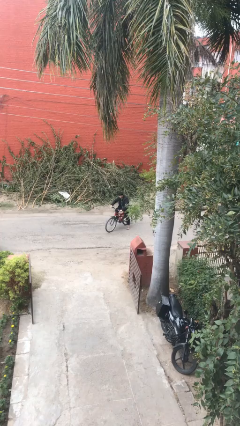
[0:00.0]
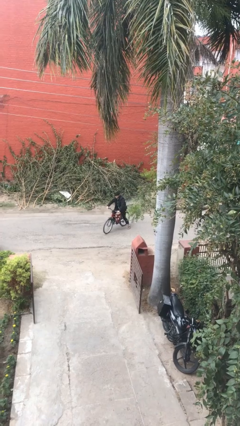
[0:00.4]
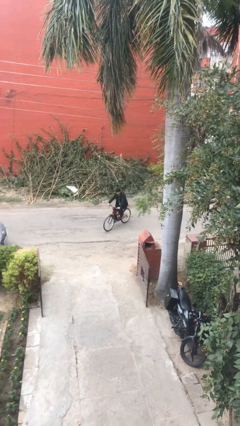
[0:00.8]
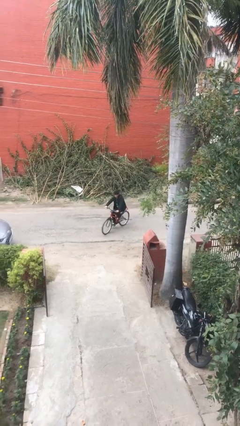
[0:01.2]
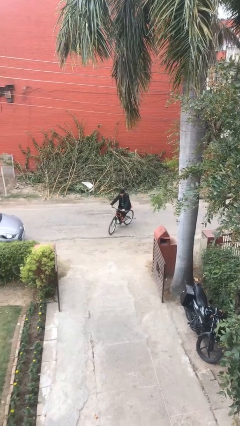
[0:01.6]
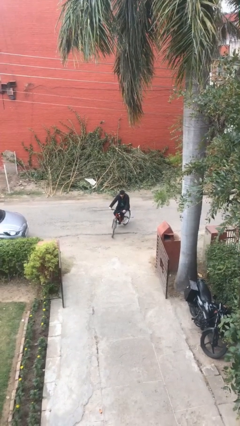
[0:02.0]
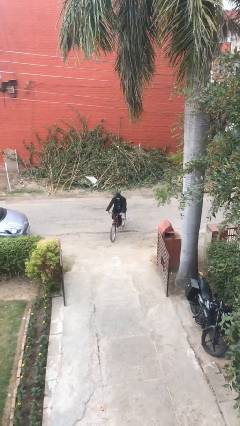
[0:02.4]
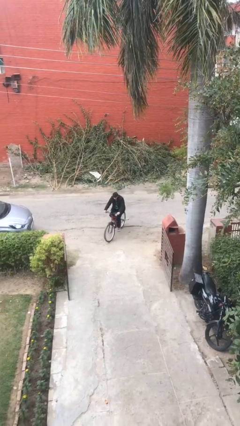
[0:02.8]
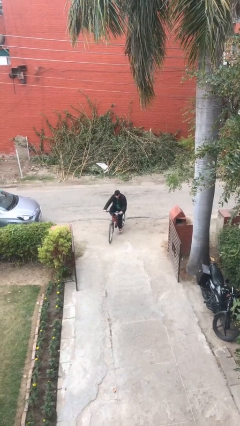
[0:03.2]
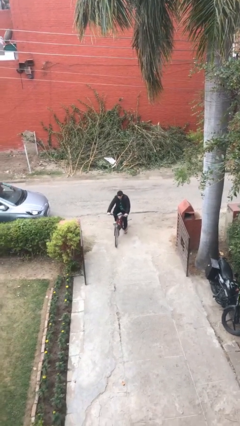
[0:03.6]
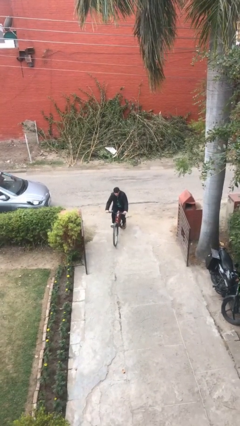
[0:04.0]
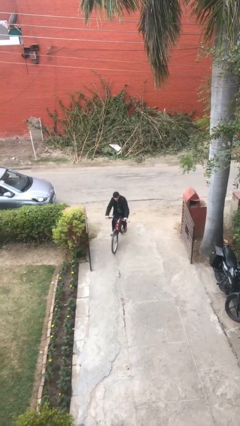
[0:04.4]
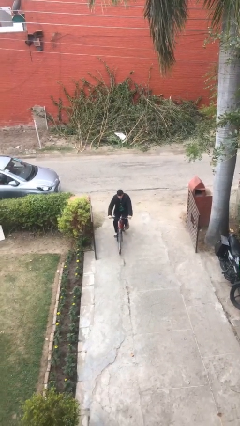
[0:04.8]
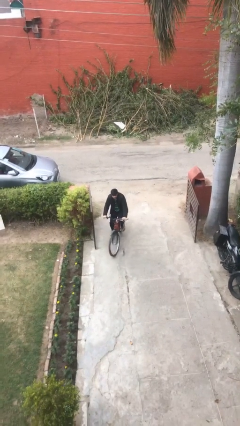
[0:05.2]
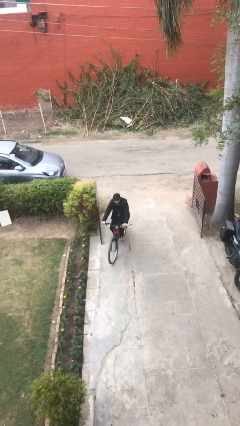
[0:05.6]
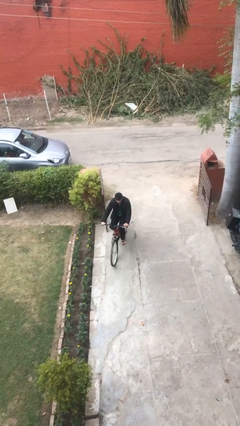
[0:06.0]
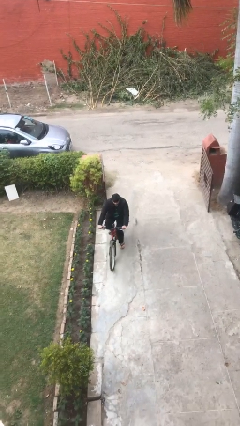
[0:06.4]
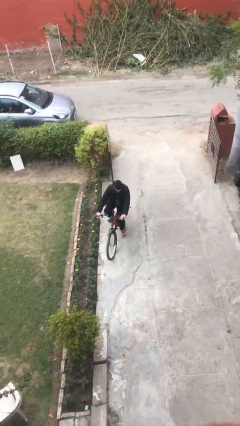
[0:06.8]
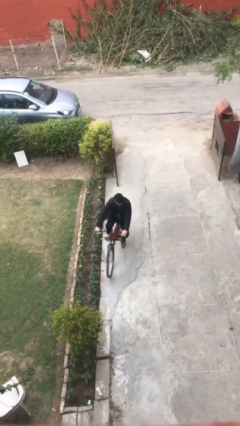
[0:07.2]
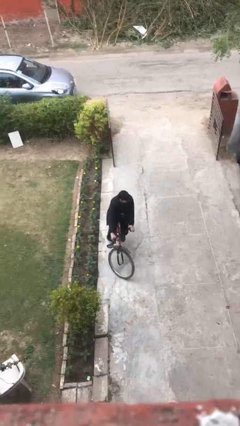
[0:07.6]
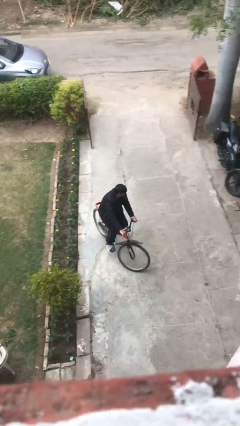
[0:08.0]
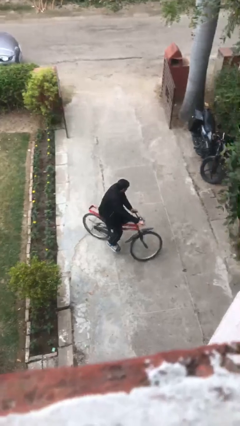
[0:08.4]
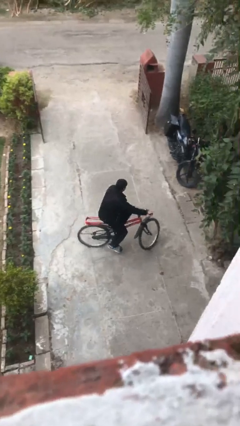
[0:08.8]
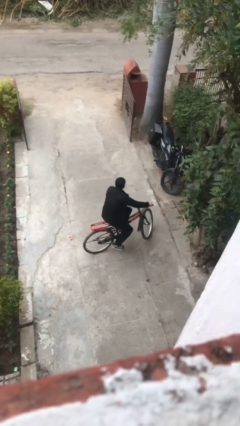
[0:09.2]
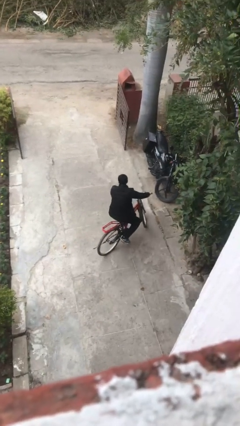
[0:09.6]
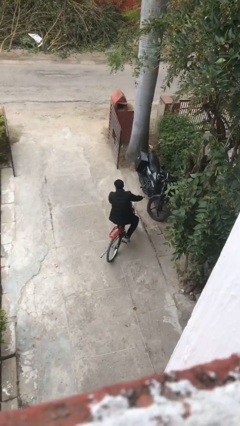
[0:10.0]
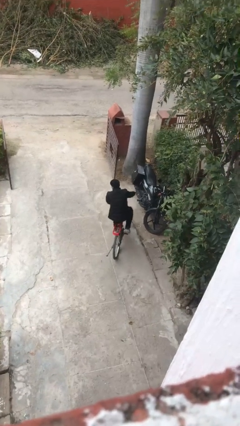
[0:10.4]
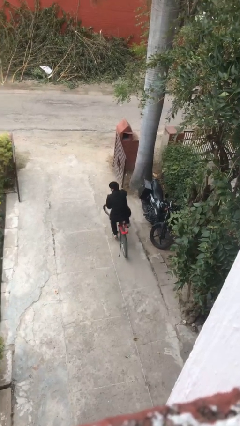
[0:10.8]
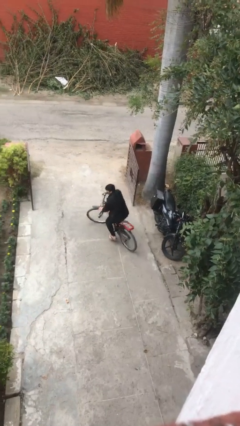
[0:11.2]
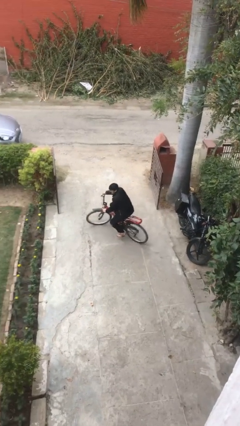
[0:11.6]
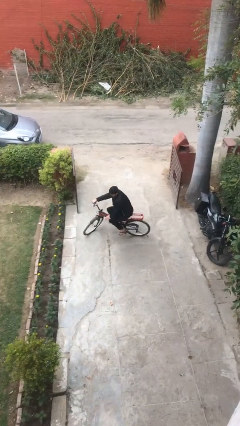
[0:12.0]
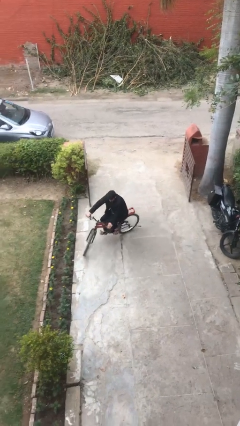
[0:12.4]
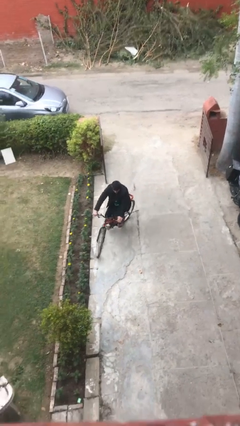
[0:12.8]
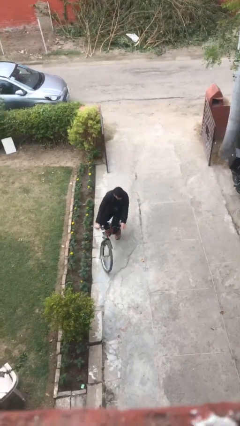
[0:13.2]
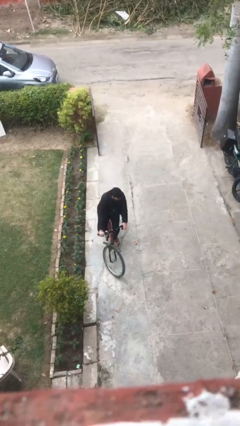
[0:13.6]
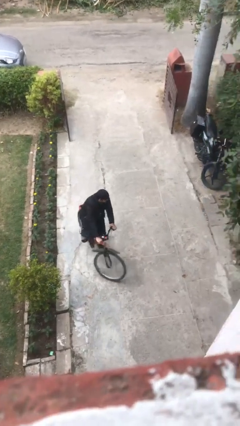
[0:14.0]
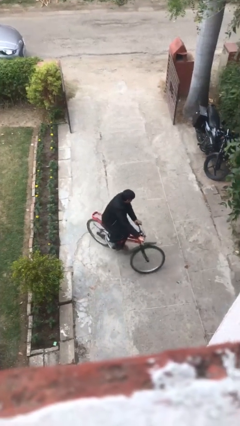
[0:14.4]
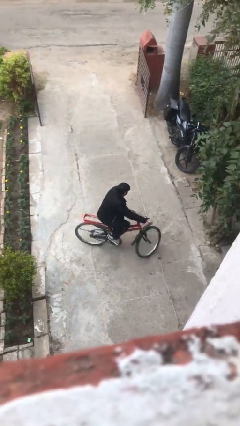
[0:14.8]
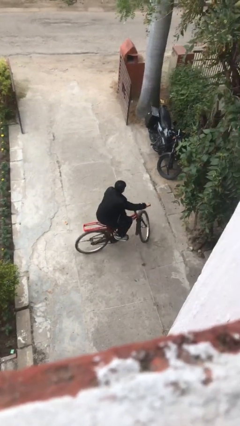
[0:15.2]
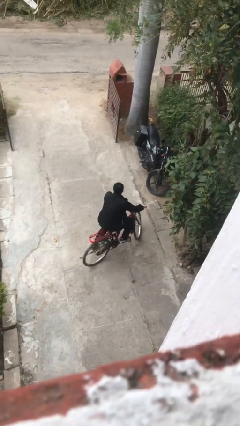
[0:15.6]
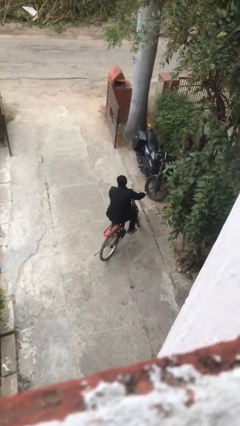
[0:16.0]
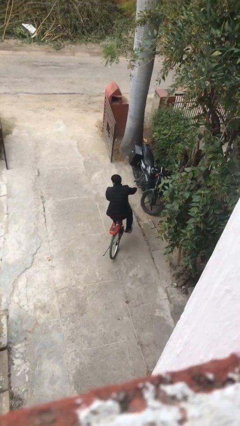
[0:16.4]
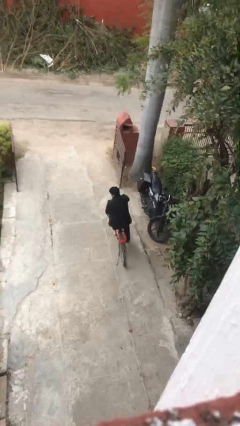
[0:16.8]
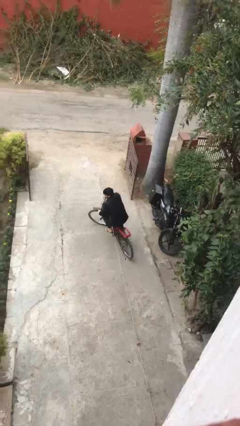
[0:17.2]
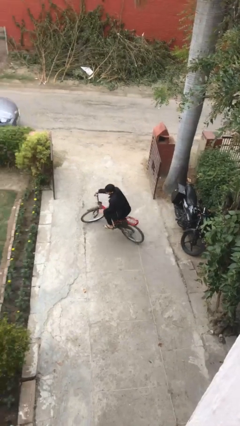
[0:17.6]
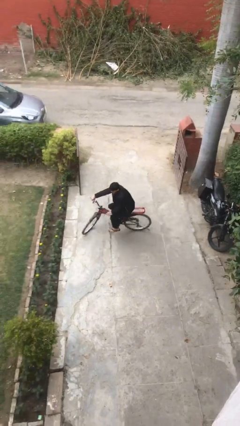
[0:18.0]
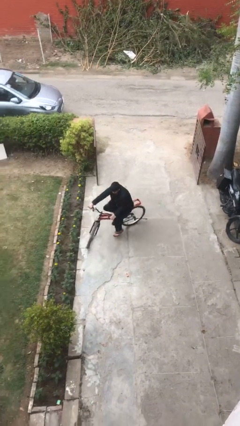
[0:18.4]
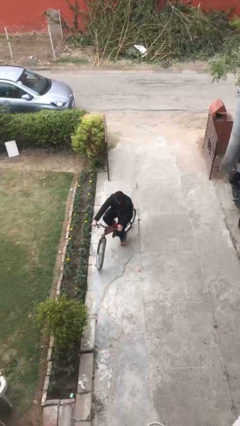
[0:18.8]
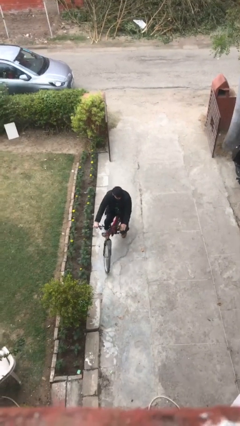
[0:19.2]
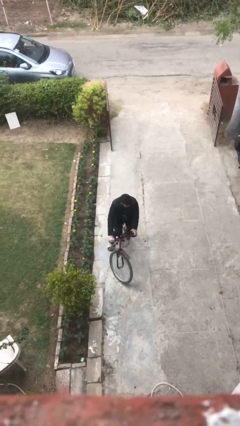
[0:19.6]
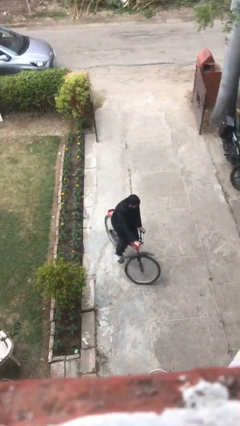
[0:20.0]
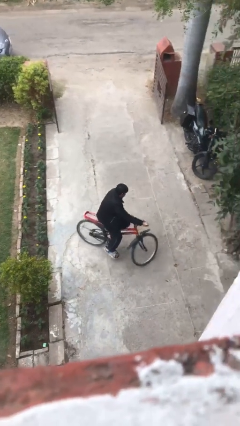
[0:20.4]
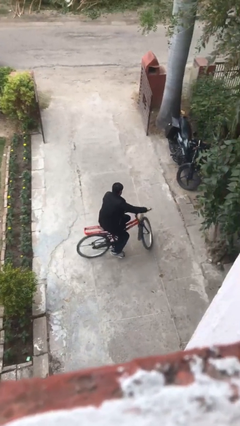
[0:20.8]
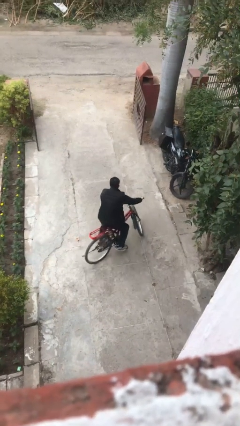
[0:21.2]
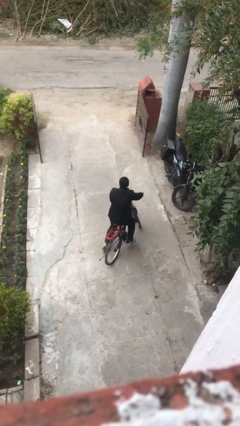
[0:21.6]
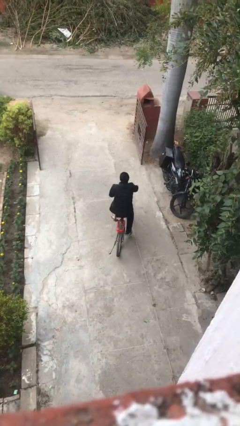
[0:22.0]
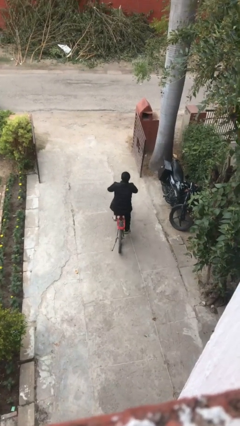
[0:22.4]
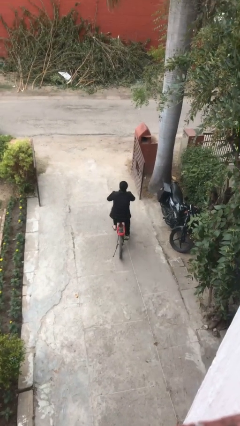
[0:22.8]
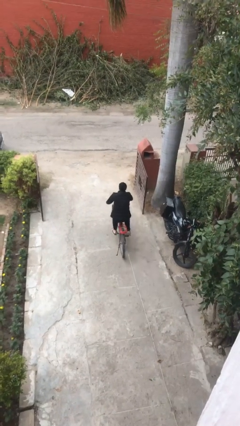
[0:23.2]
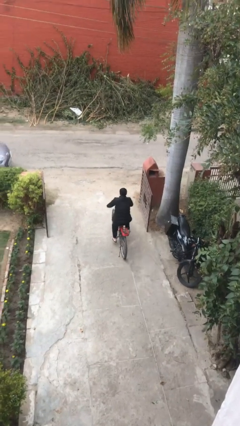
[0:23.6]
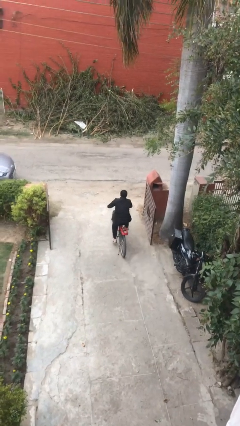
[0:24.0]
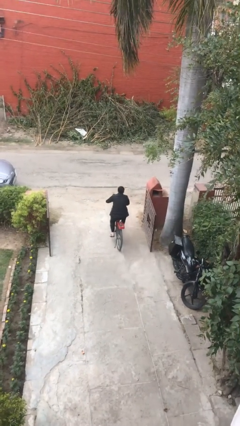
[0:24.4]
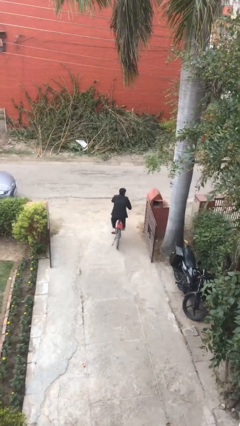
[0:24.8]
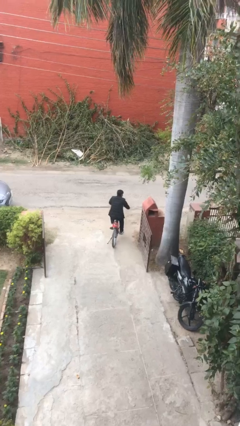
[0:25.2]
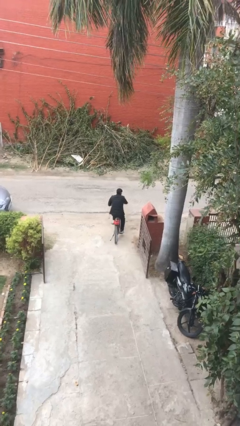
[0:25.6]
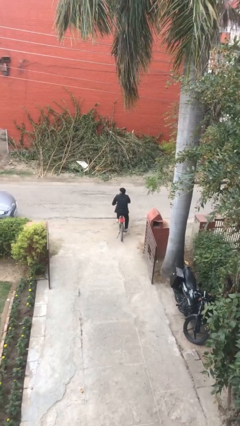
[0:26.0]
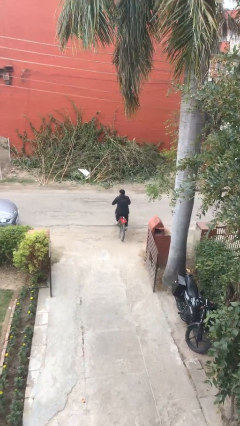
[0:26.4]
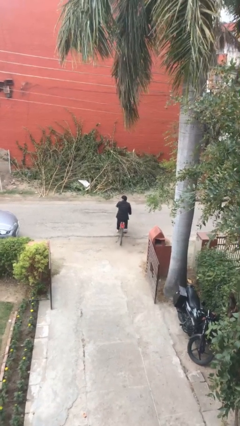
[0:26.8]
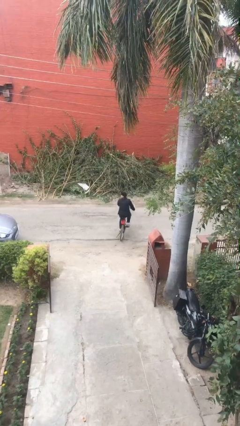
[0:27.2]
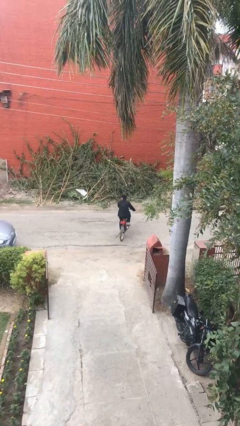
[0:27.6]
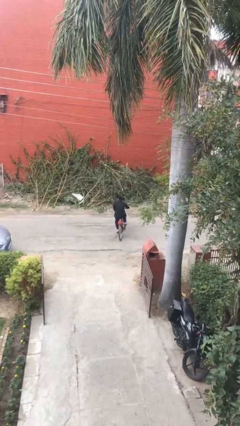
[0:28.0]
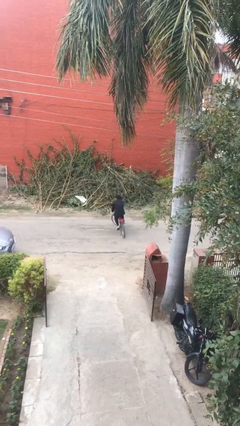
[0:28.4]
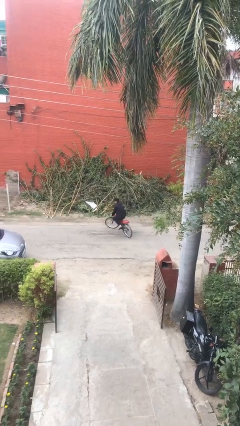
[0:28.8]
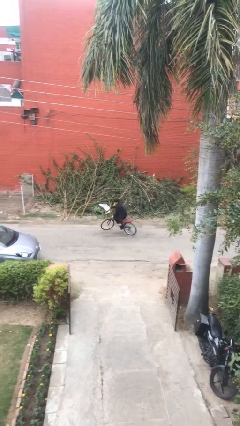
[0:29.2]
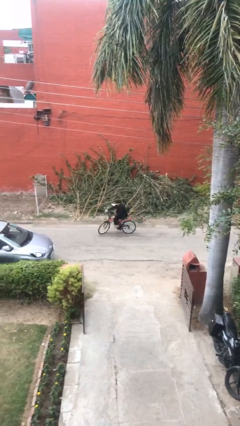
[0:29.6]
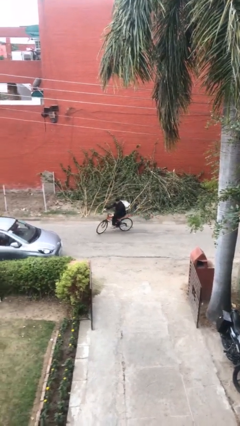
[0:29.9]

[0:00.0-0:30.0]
person rides bicycle

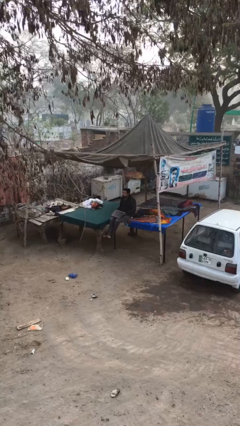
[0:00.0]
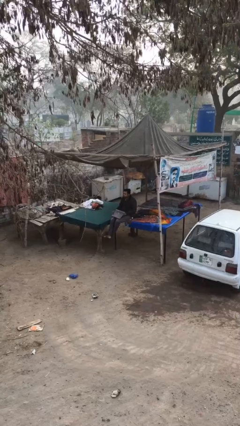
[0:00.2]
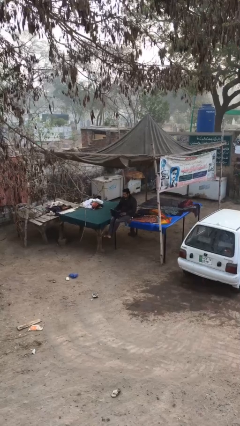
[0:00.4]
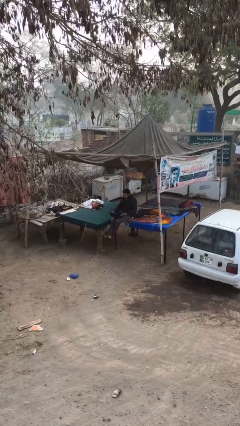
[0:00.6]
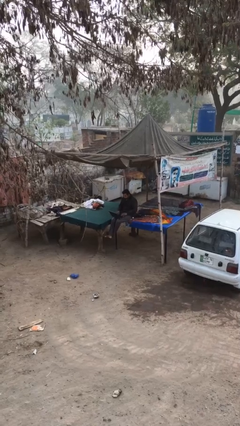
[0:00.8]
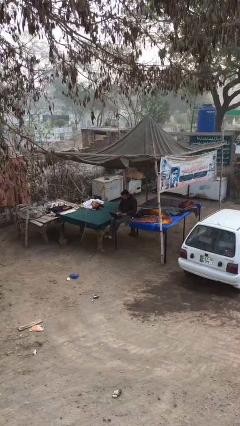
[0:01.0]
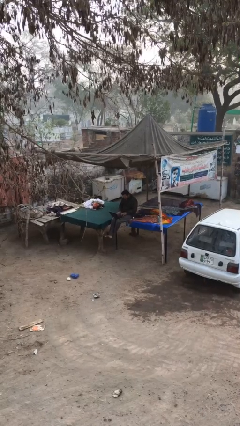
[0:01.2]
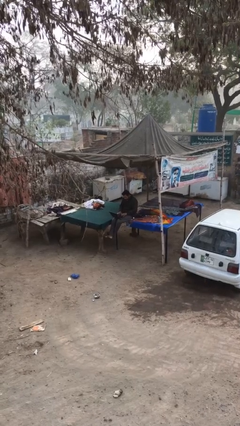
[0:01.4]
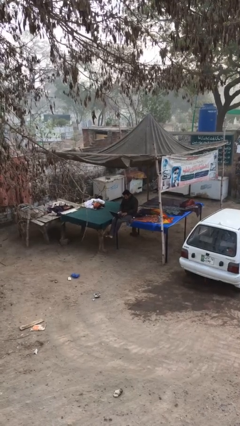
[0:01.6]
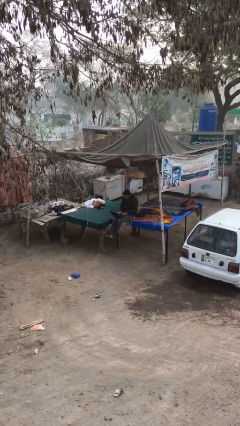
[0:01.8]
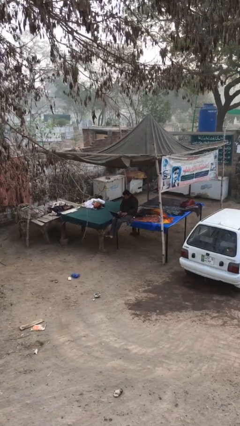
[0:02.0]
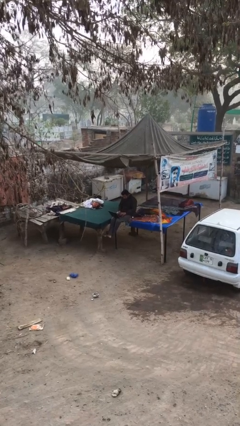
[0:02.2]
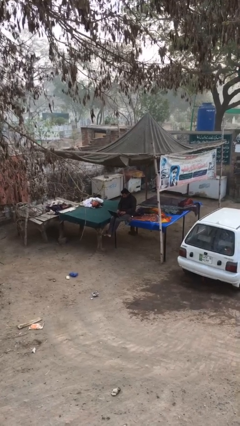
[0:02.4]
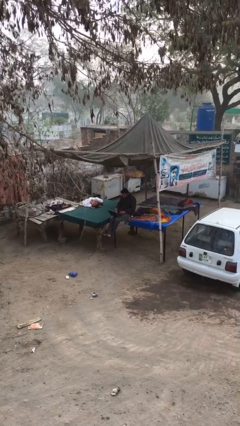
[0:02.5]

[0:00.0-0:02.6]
person interacts with laptop

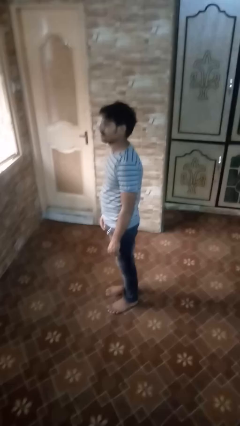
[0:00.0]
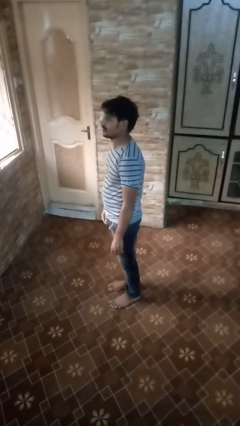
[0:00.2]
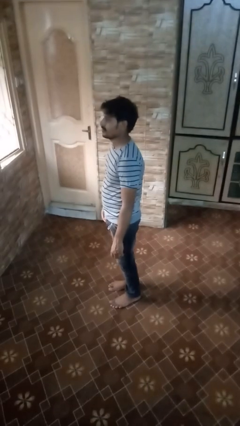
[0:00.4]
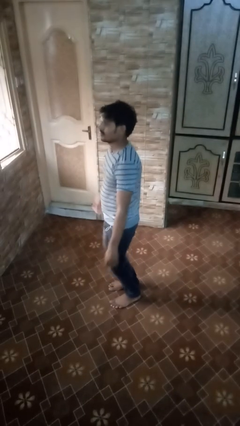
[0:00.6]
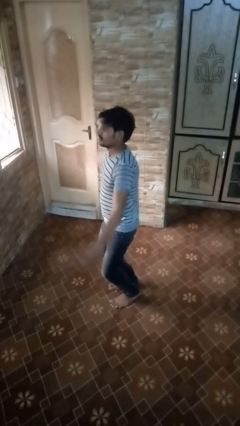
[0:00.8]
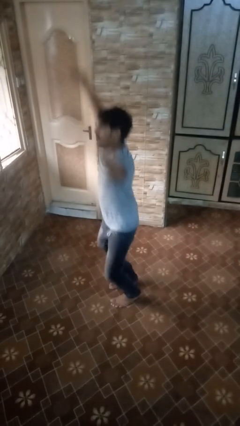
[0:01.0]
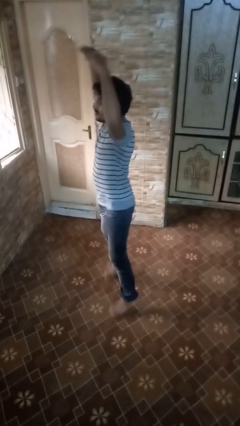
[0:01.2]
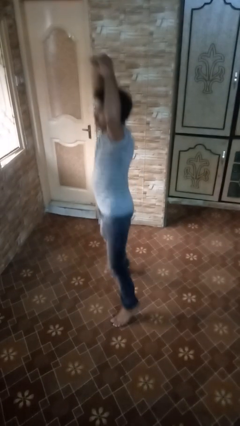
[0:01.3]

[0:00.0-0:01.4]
person exercises with jumping jacks
